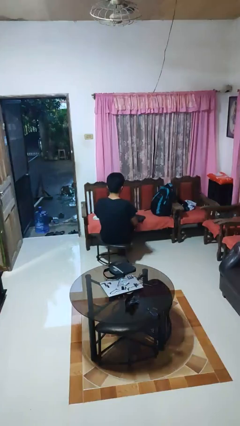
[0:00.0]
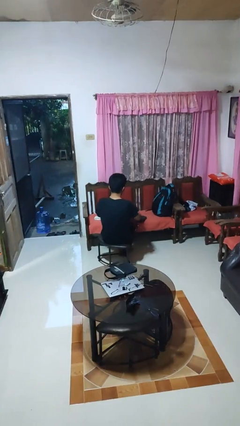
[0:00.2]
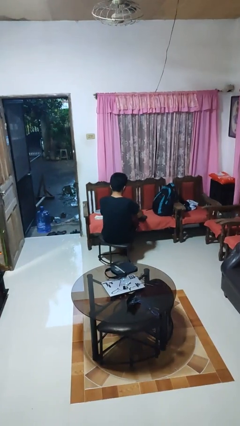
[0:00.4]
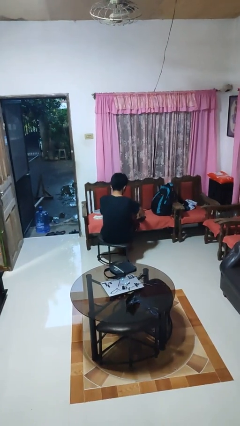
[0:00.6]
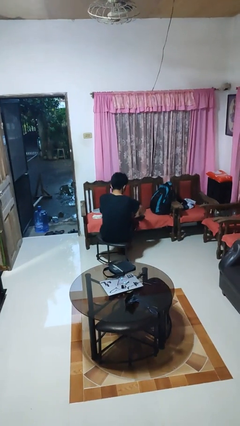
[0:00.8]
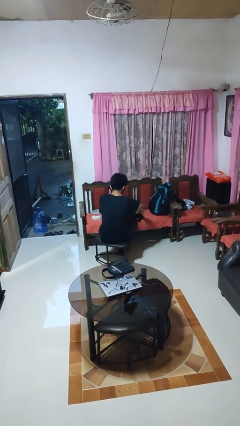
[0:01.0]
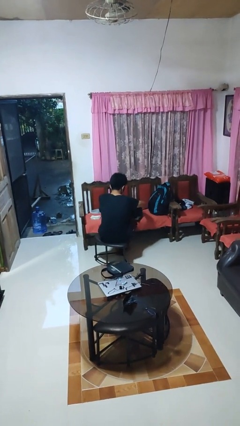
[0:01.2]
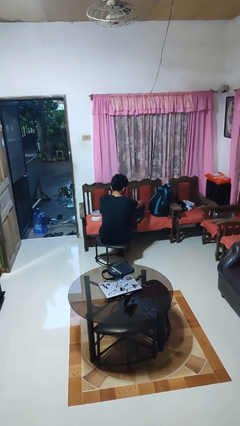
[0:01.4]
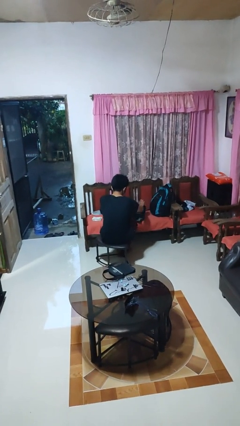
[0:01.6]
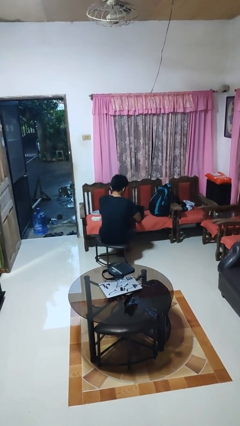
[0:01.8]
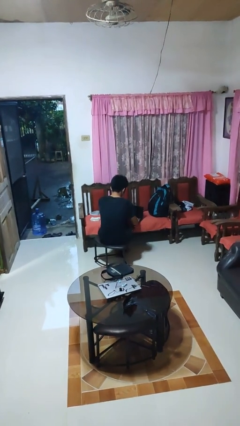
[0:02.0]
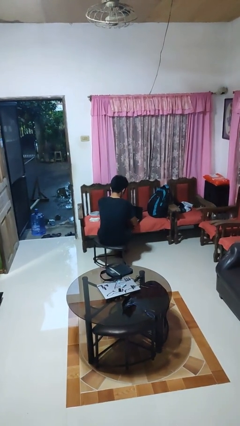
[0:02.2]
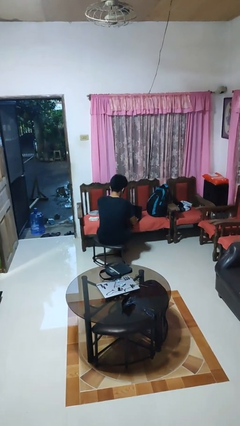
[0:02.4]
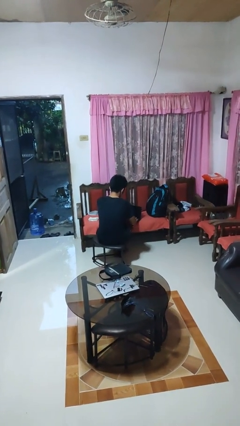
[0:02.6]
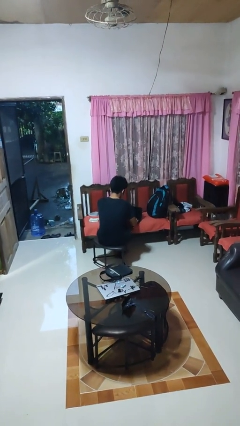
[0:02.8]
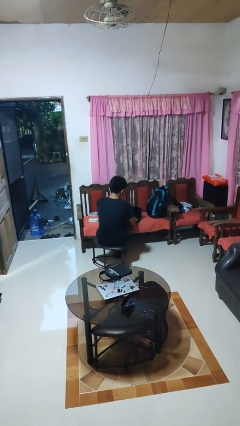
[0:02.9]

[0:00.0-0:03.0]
person opens laptop

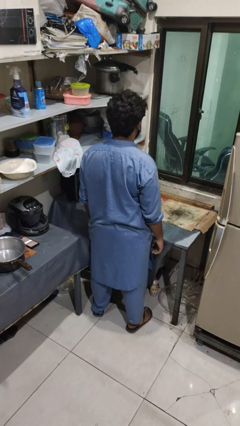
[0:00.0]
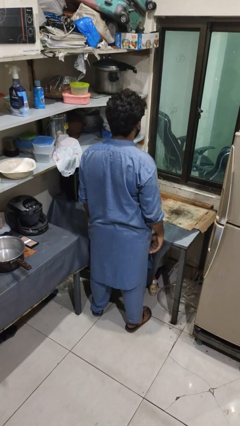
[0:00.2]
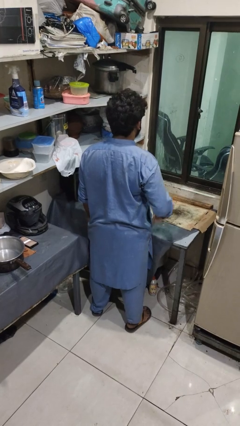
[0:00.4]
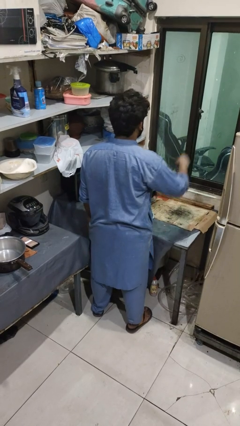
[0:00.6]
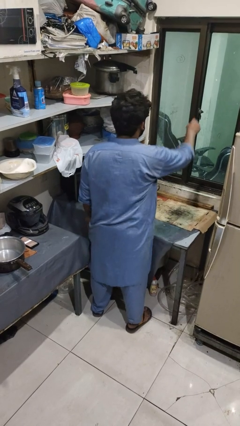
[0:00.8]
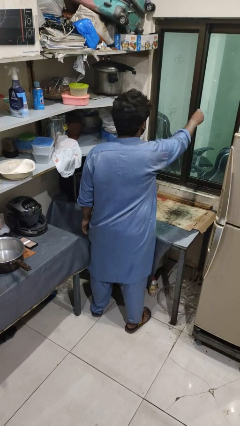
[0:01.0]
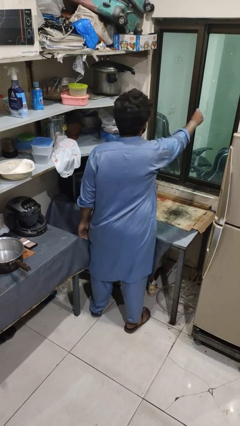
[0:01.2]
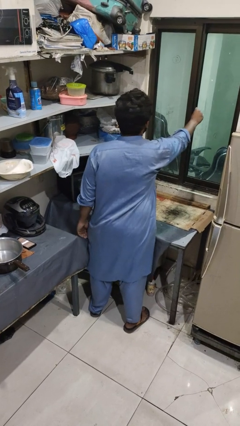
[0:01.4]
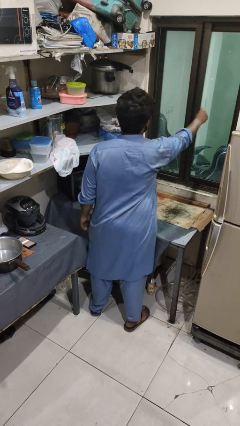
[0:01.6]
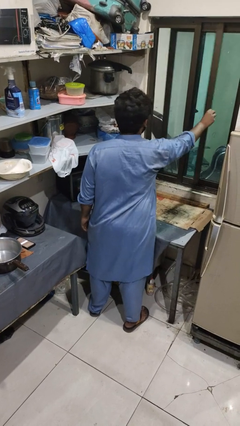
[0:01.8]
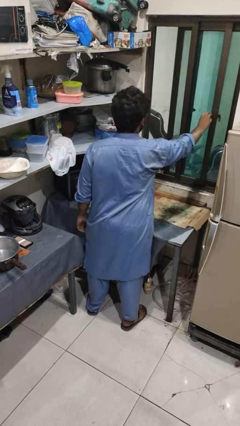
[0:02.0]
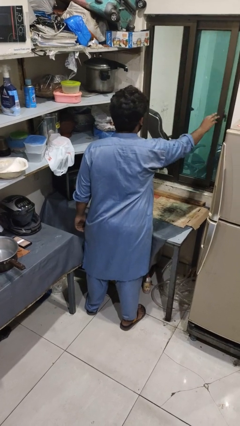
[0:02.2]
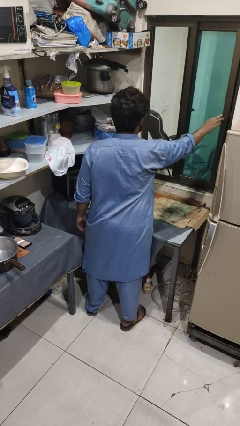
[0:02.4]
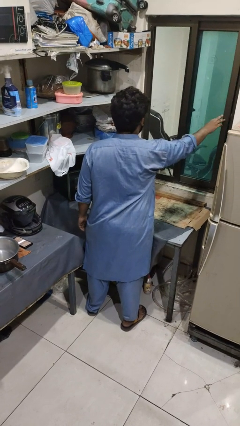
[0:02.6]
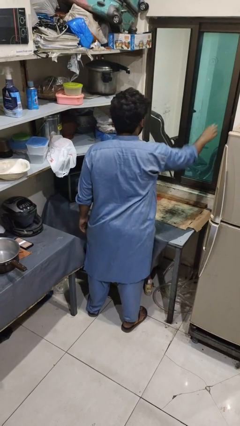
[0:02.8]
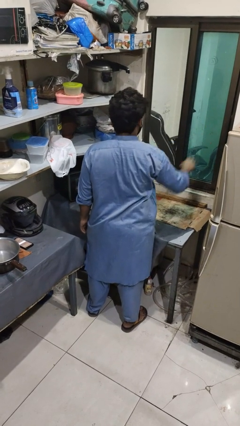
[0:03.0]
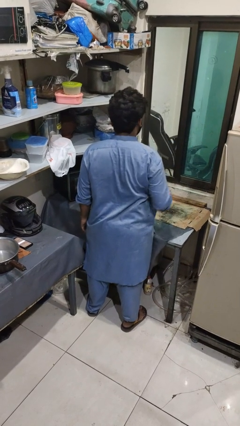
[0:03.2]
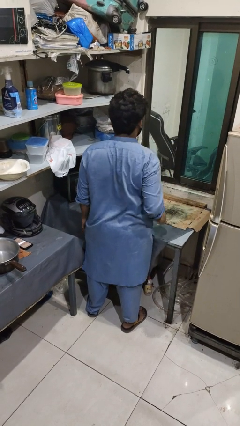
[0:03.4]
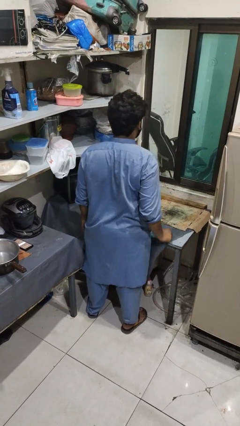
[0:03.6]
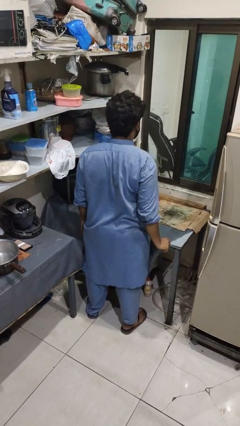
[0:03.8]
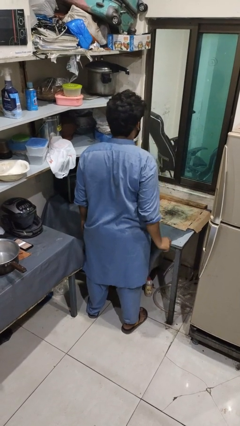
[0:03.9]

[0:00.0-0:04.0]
person opens home window

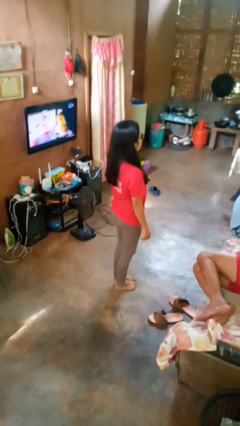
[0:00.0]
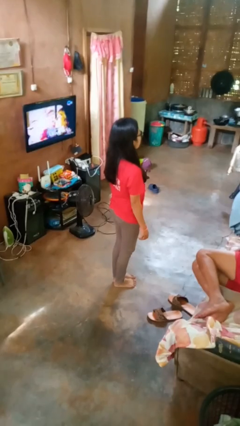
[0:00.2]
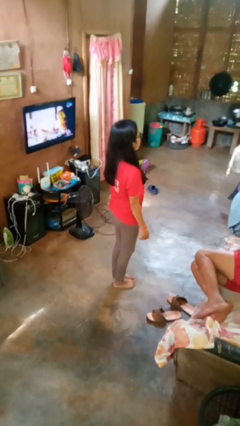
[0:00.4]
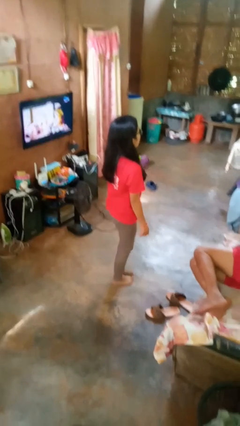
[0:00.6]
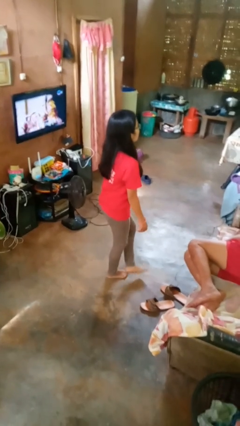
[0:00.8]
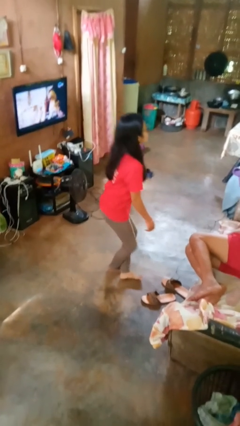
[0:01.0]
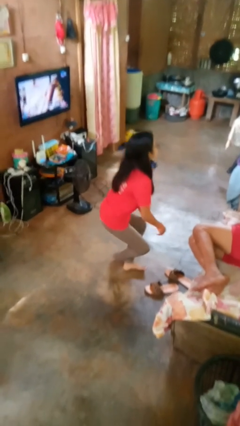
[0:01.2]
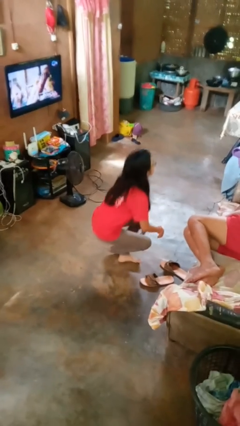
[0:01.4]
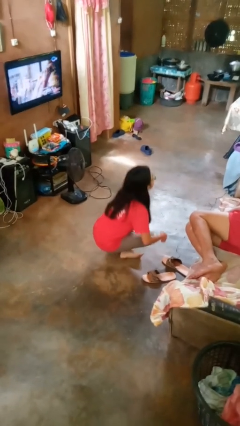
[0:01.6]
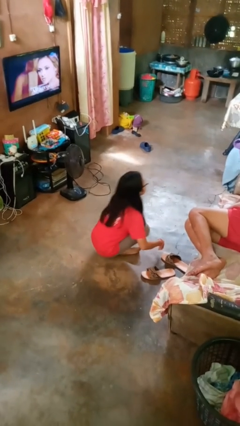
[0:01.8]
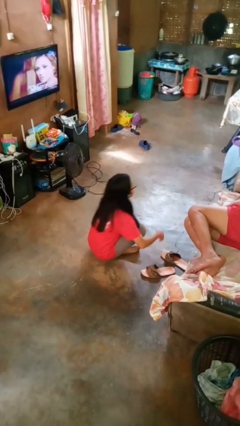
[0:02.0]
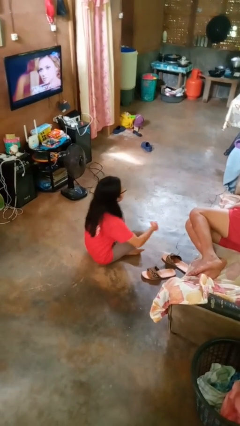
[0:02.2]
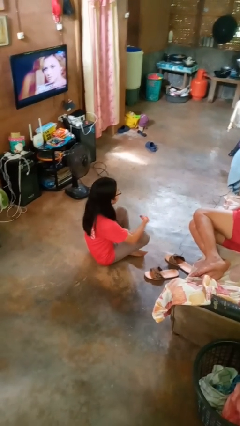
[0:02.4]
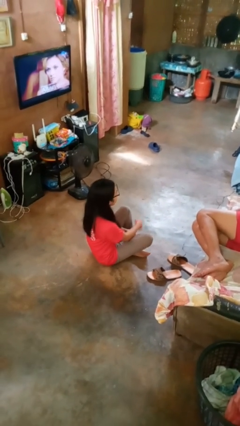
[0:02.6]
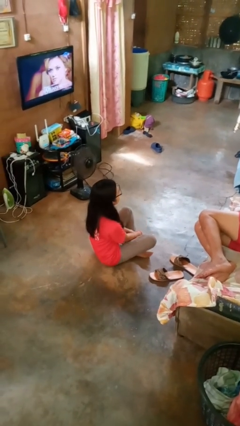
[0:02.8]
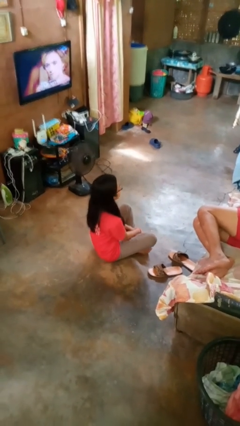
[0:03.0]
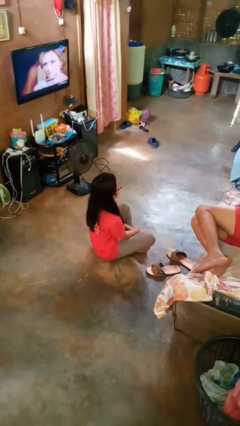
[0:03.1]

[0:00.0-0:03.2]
person sits crisscross

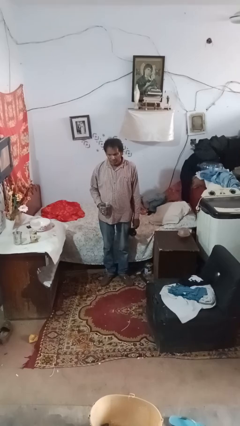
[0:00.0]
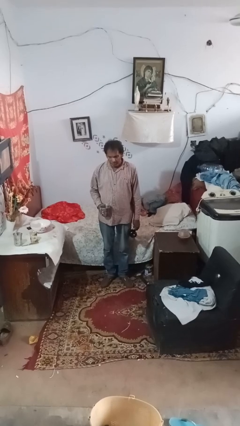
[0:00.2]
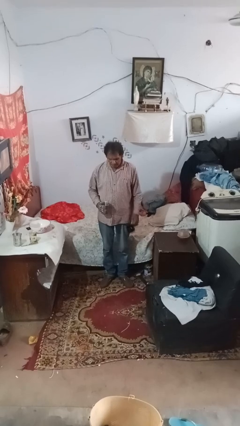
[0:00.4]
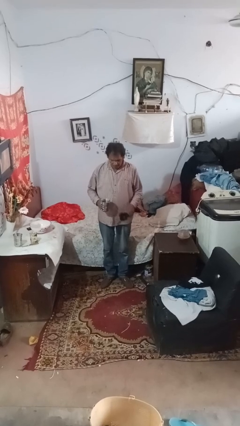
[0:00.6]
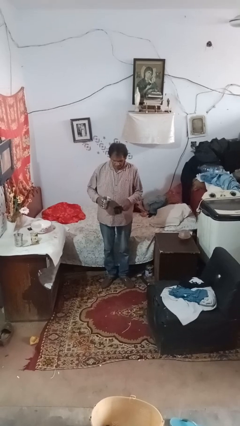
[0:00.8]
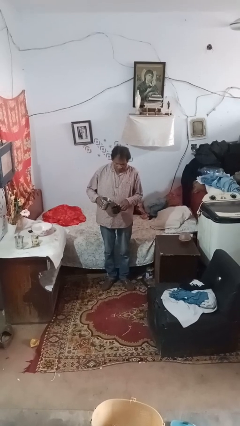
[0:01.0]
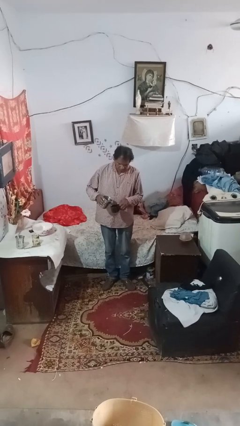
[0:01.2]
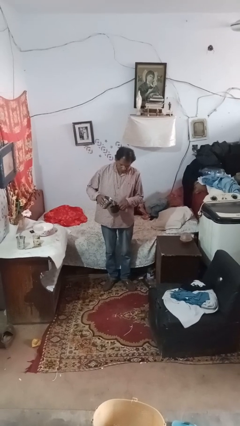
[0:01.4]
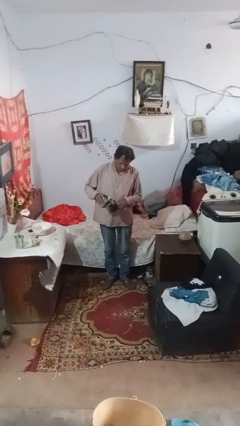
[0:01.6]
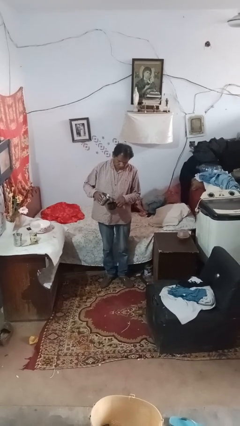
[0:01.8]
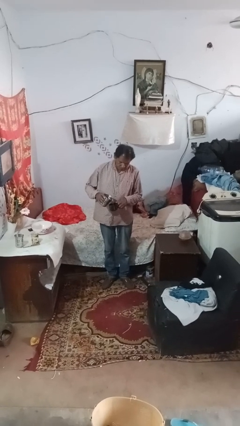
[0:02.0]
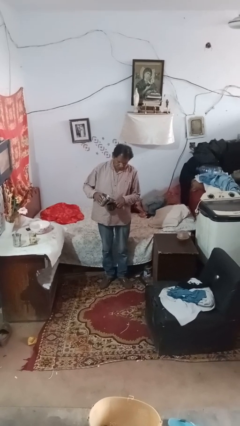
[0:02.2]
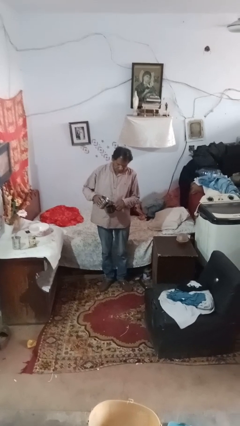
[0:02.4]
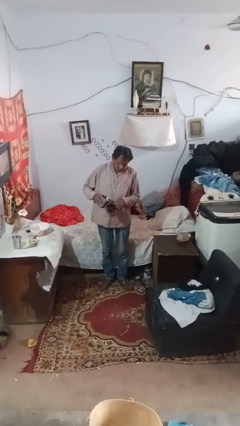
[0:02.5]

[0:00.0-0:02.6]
person pours liquid into cup

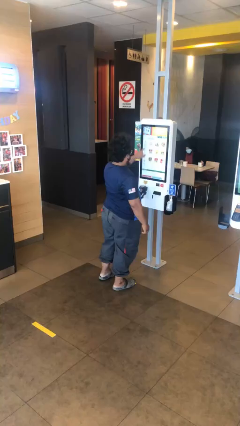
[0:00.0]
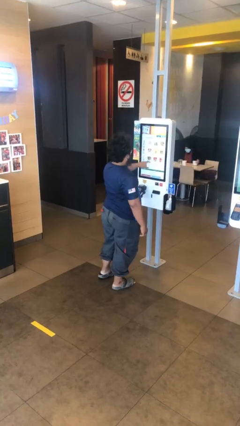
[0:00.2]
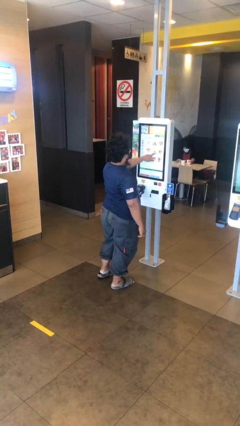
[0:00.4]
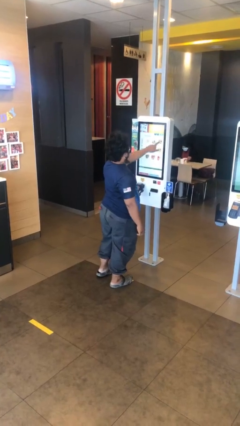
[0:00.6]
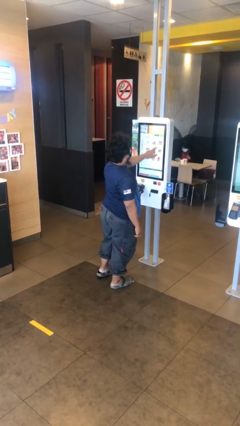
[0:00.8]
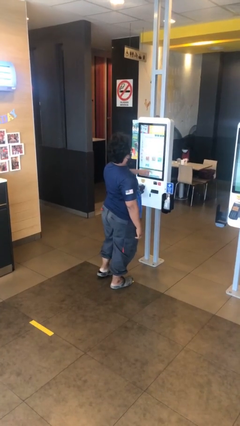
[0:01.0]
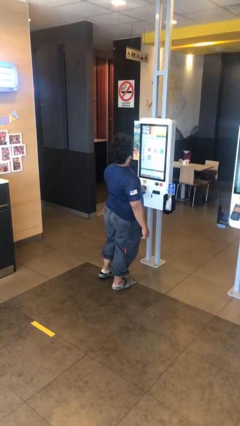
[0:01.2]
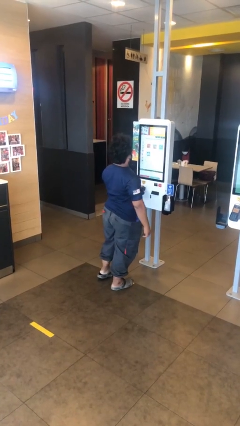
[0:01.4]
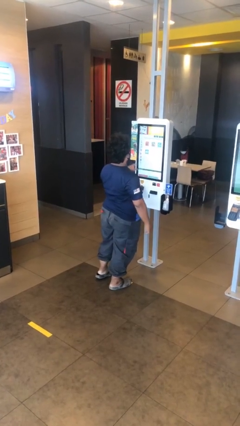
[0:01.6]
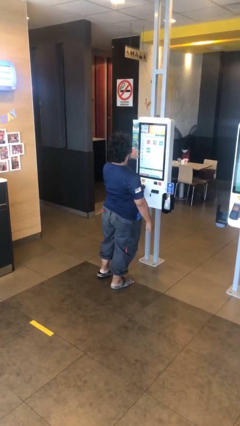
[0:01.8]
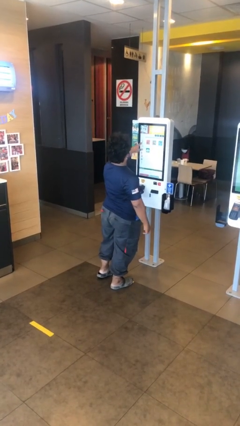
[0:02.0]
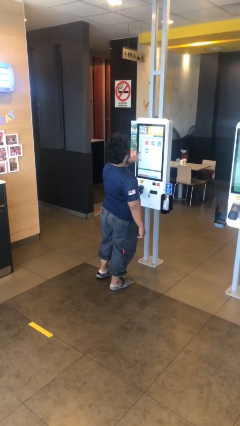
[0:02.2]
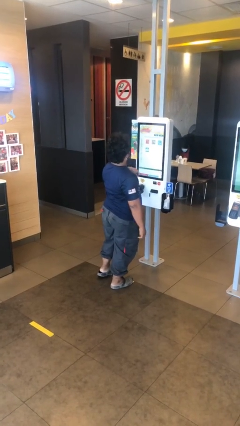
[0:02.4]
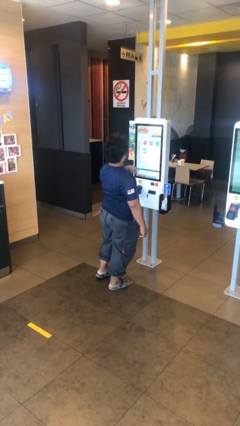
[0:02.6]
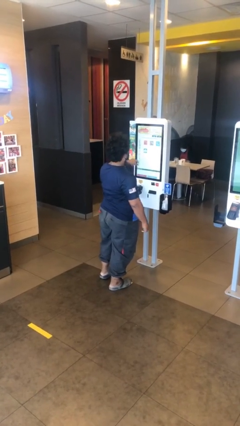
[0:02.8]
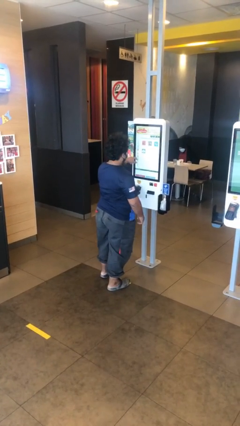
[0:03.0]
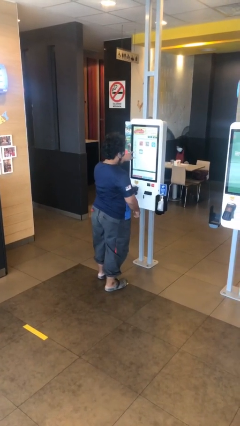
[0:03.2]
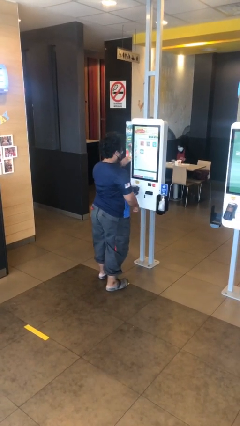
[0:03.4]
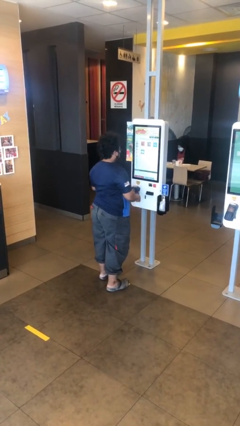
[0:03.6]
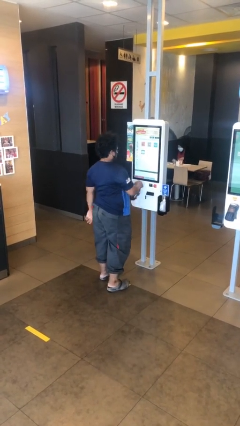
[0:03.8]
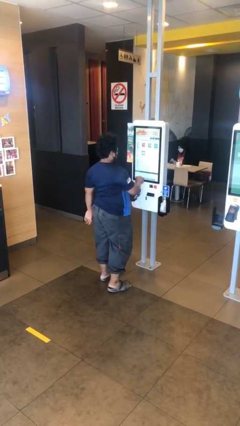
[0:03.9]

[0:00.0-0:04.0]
person purchases from machine

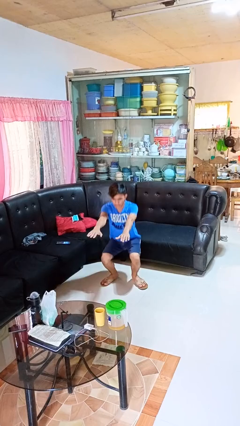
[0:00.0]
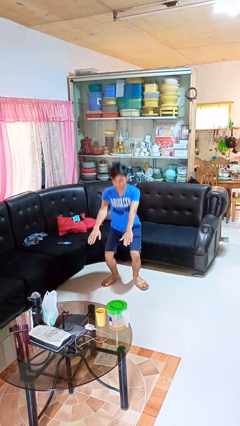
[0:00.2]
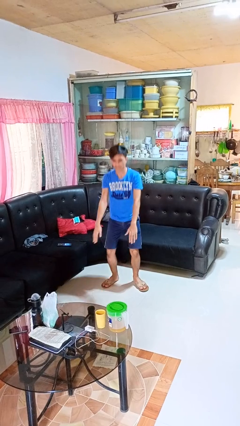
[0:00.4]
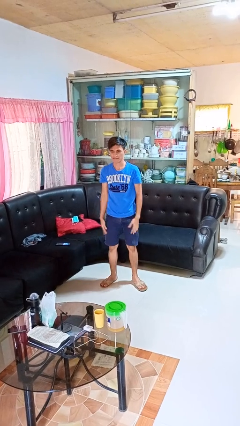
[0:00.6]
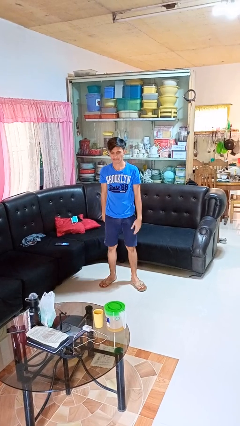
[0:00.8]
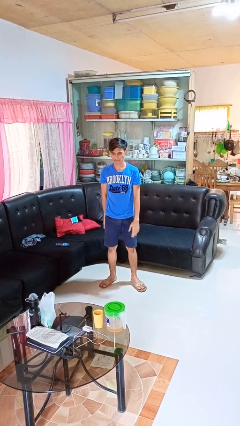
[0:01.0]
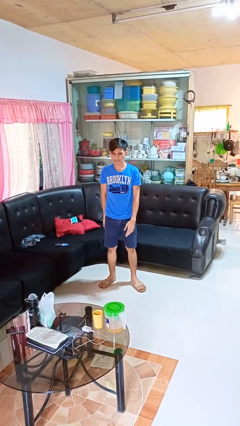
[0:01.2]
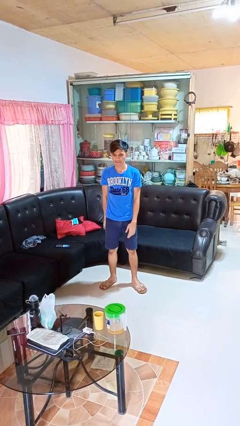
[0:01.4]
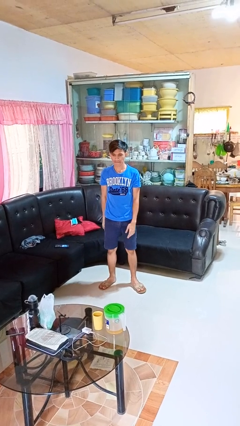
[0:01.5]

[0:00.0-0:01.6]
person stands up
